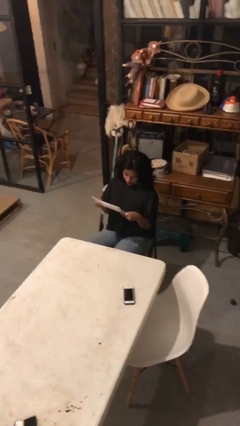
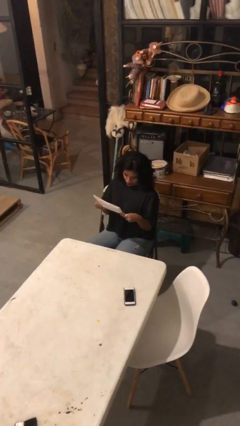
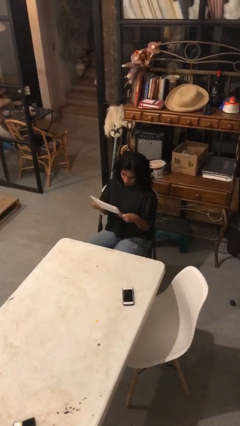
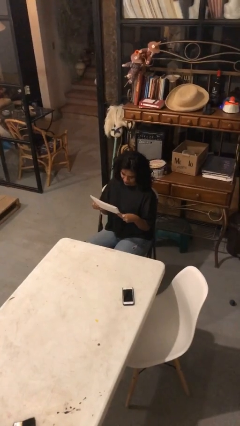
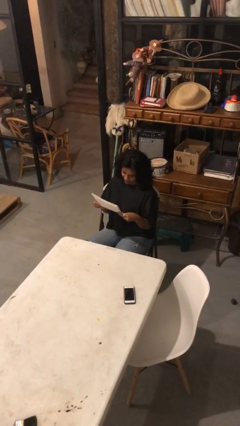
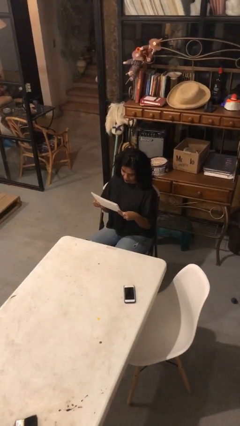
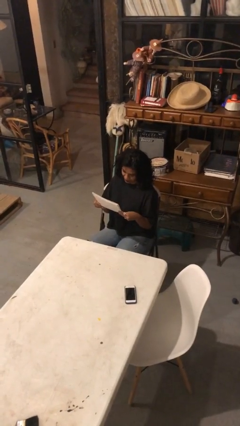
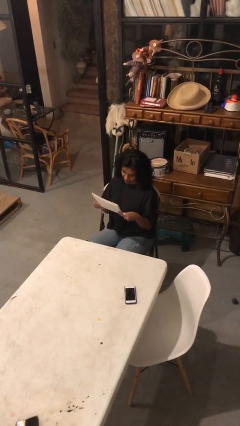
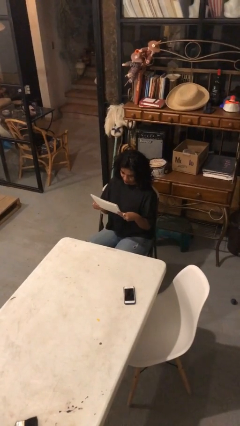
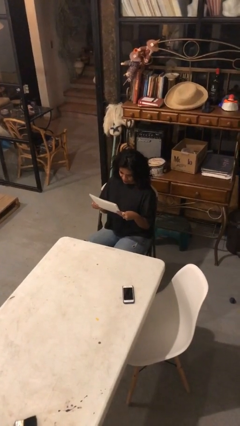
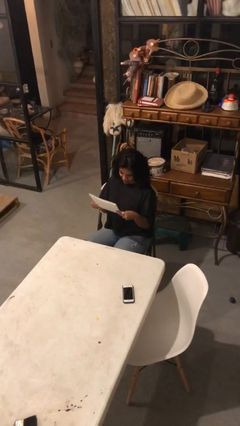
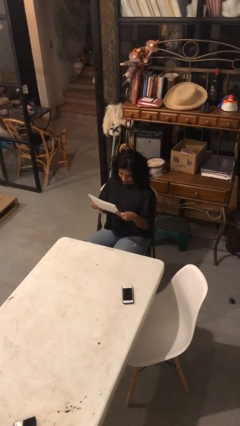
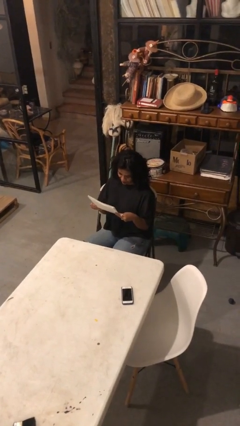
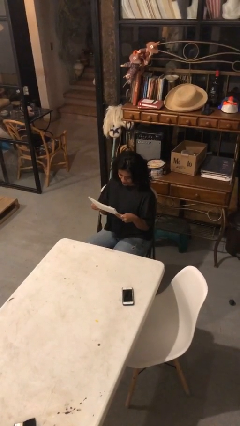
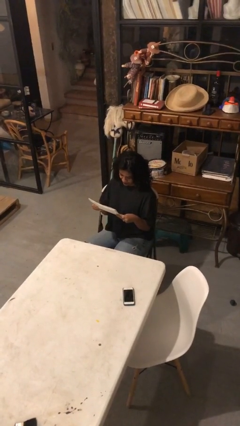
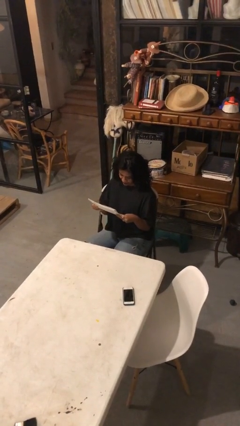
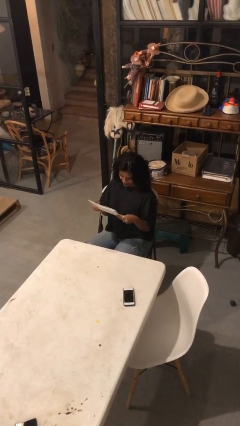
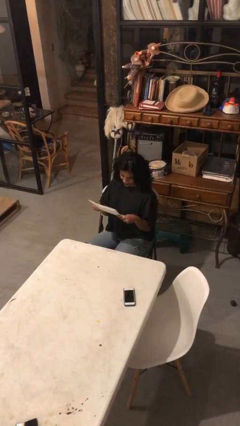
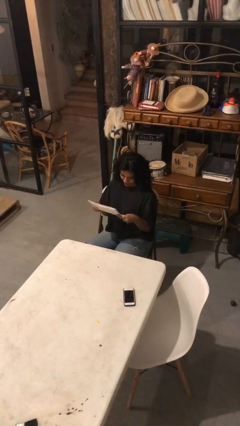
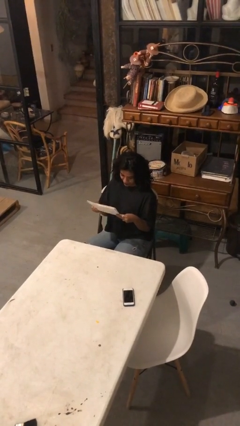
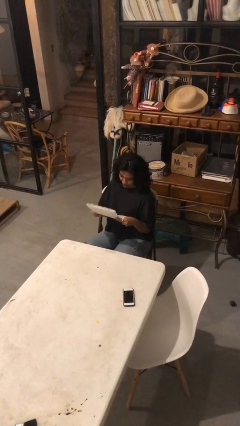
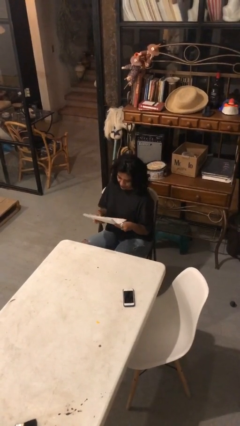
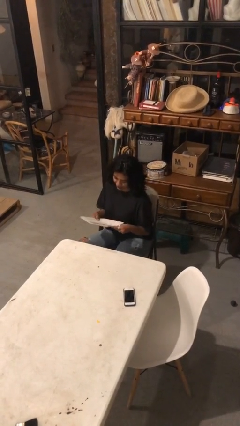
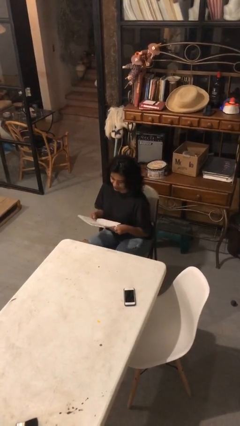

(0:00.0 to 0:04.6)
person reads document

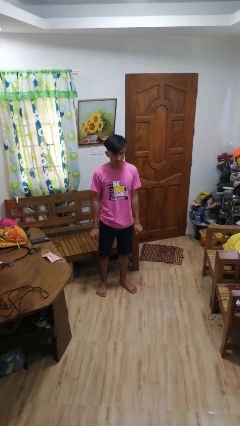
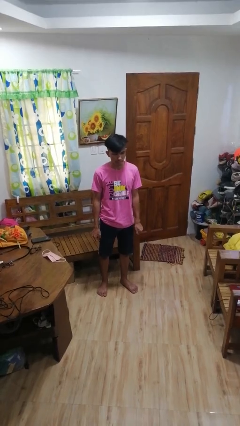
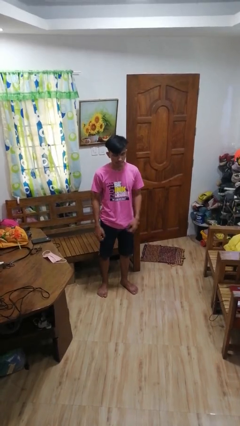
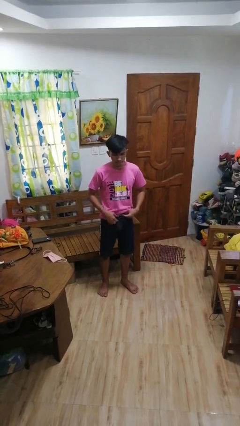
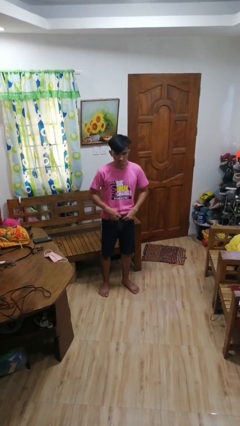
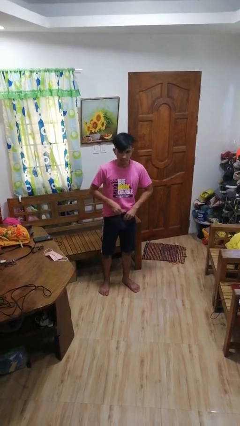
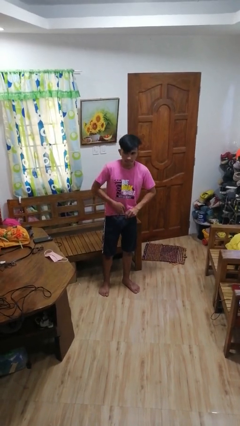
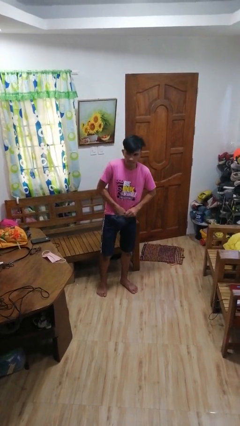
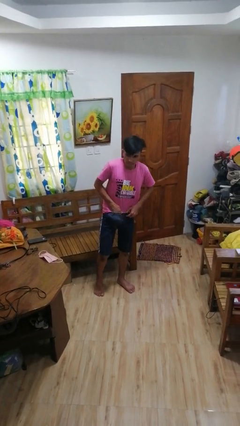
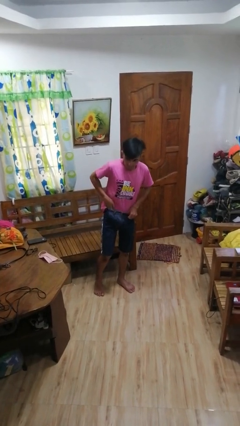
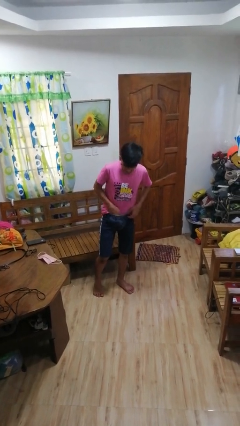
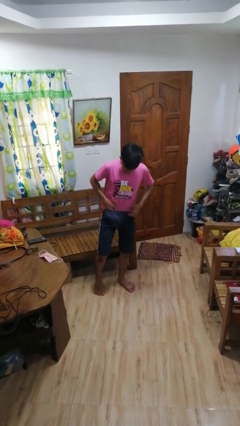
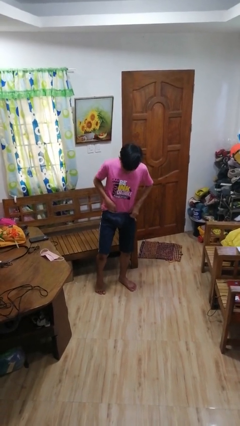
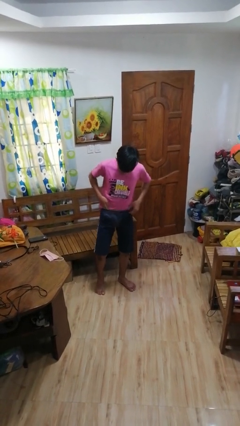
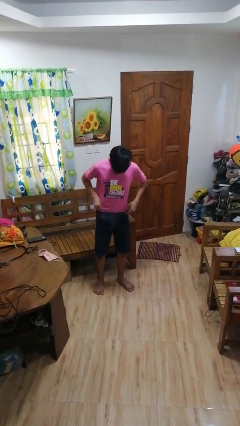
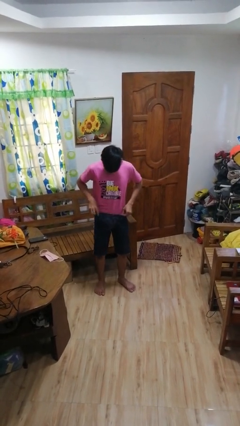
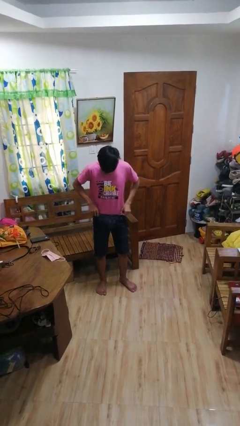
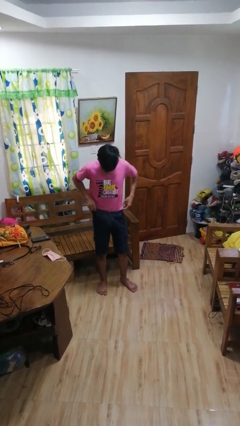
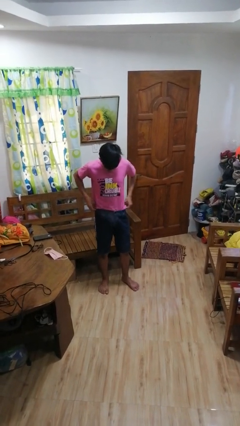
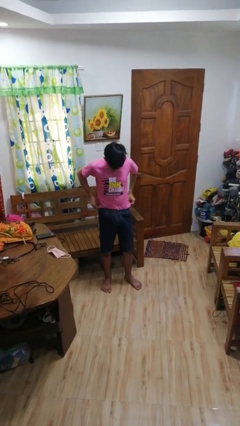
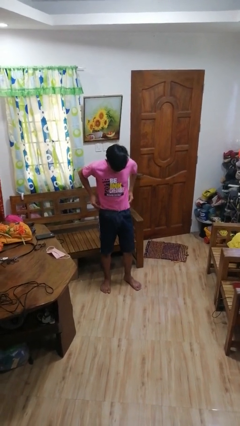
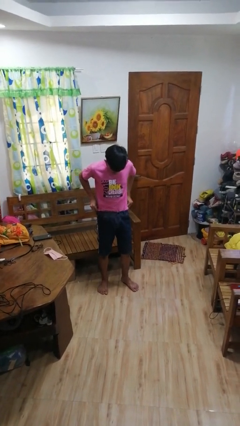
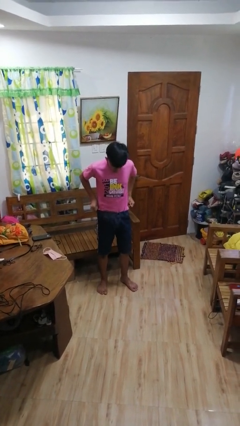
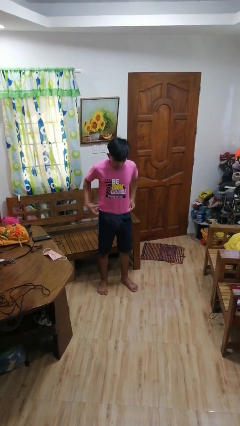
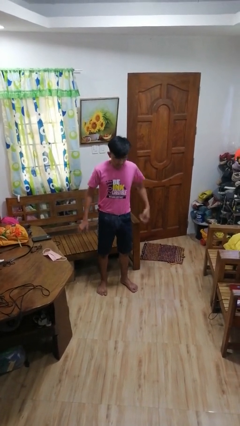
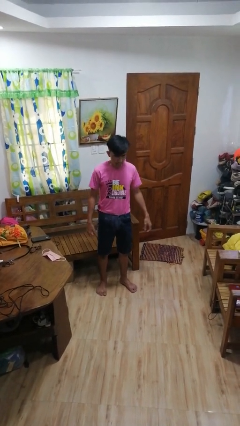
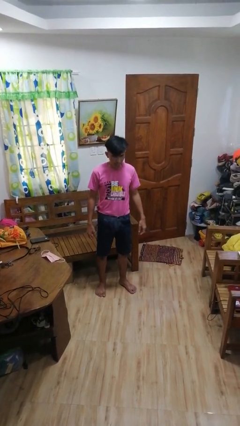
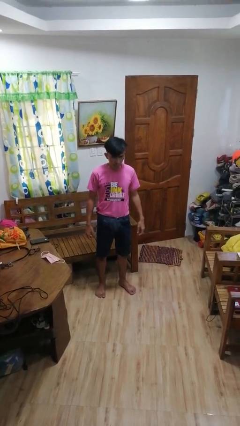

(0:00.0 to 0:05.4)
person tucks in shirt

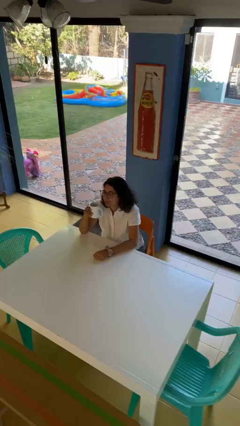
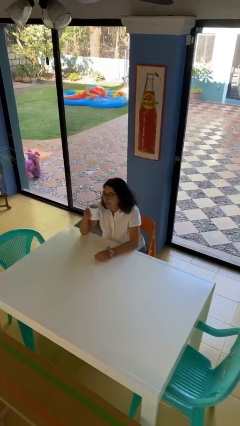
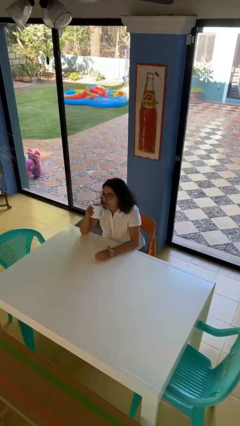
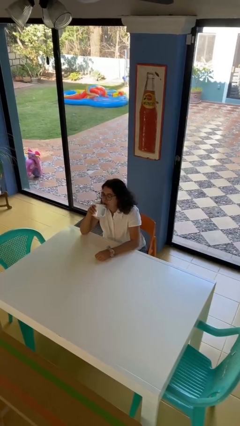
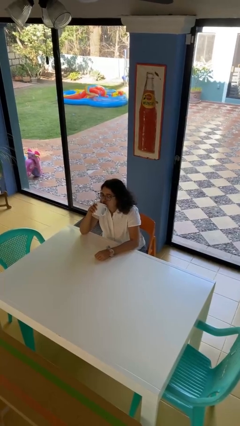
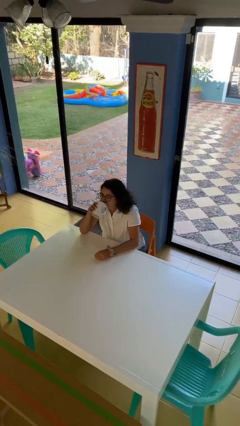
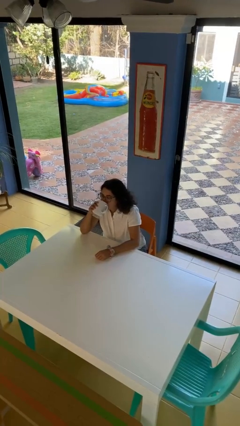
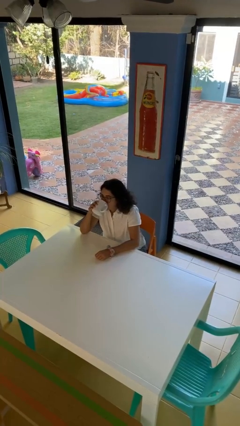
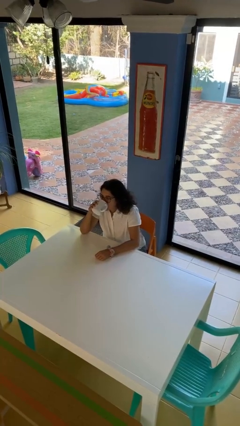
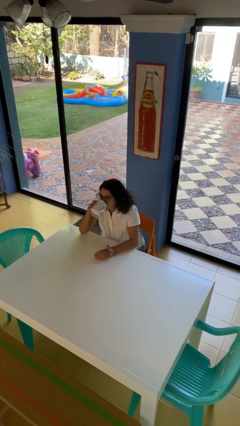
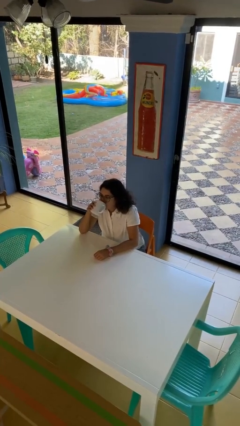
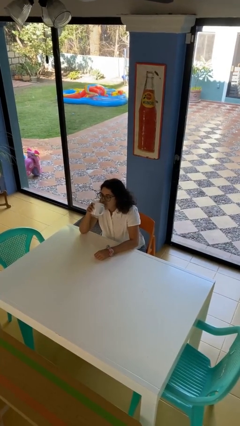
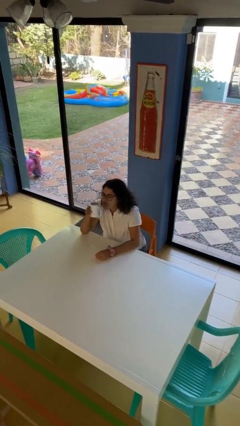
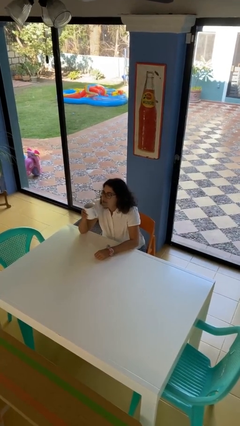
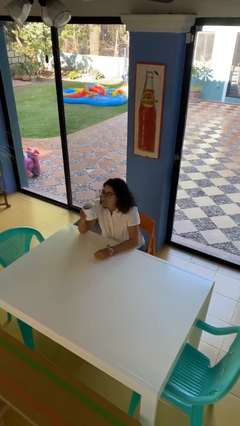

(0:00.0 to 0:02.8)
person drinks from mug

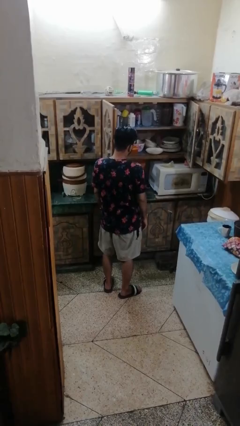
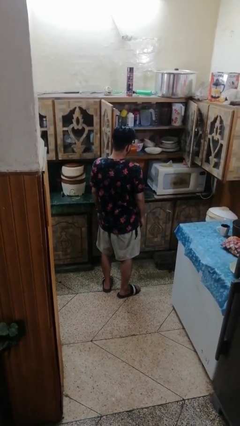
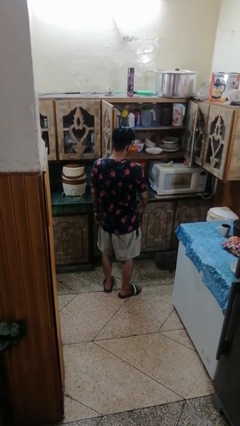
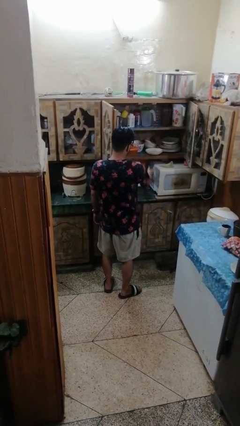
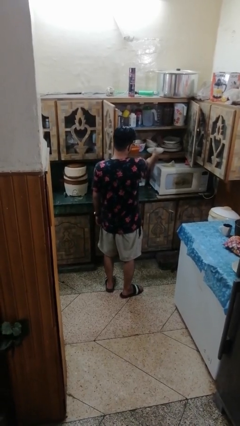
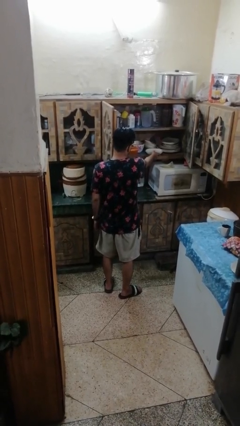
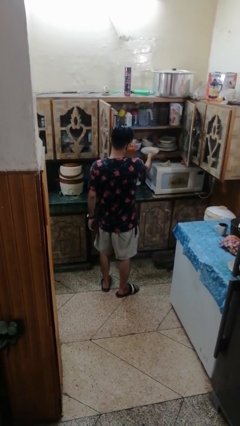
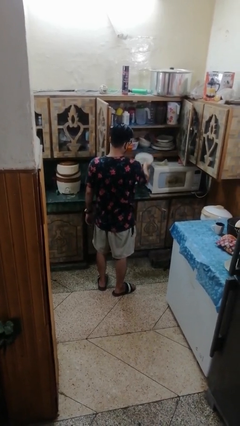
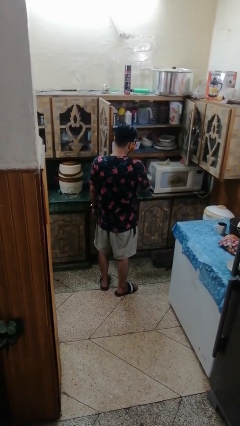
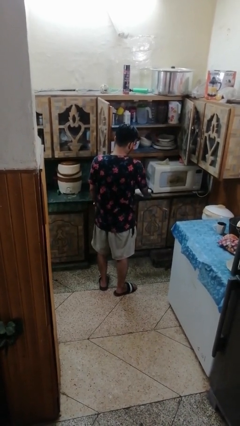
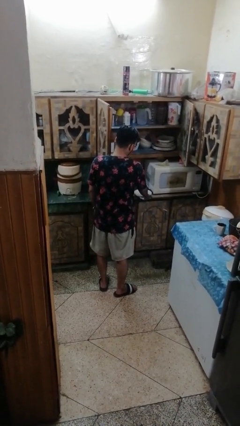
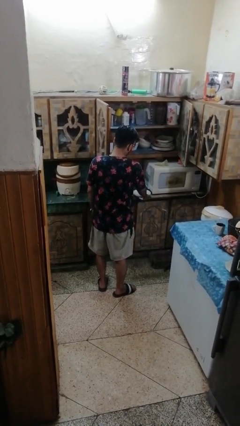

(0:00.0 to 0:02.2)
person takes object from cabinet

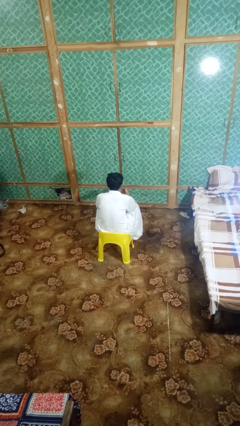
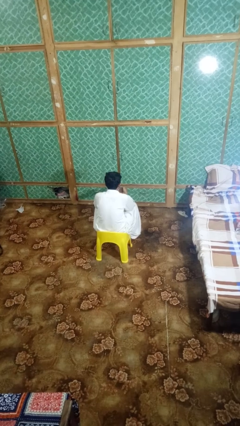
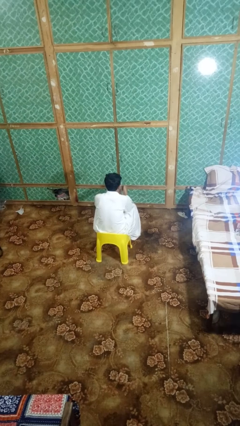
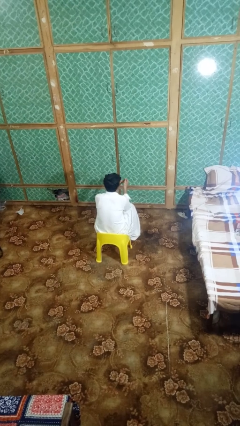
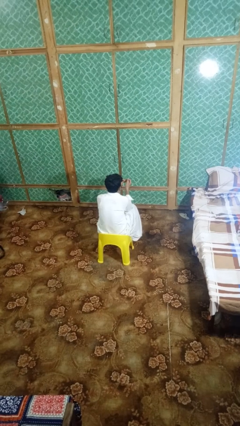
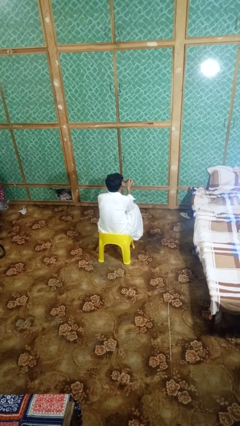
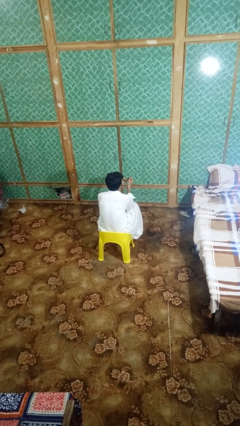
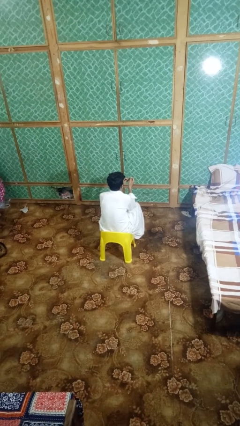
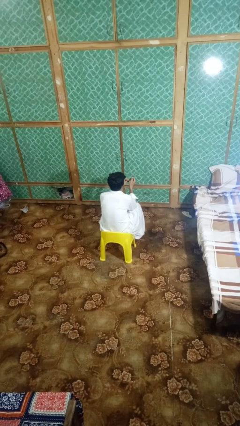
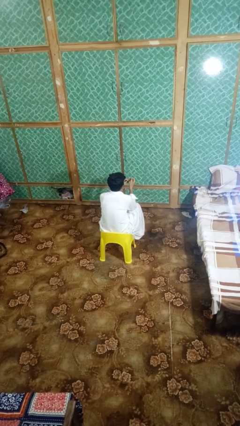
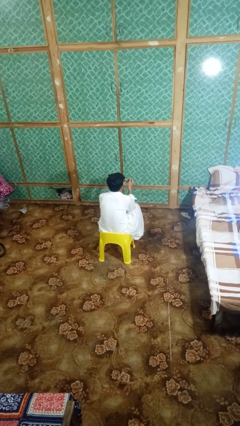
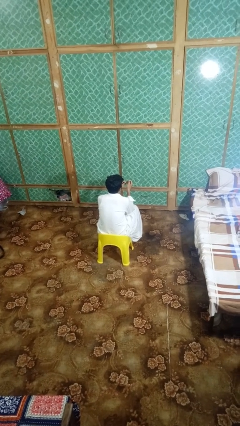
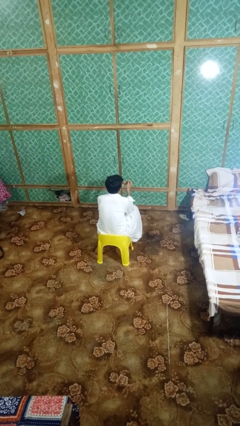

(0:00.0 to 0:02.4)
person files fingernails

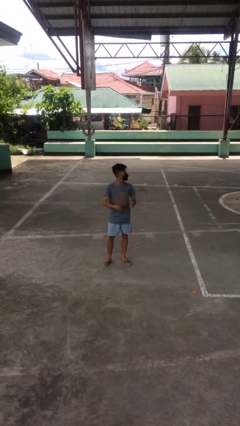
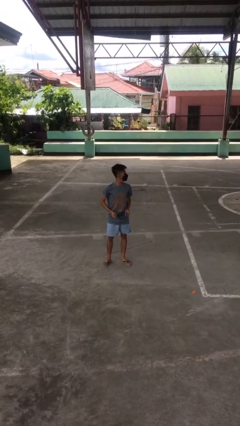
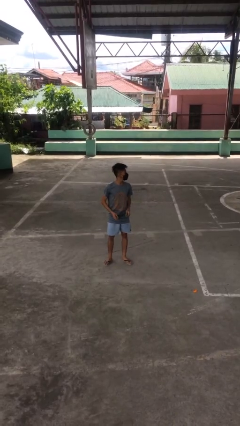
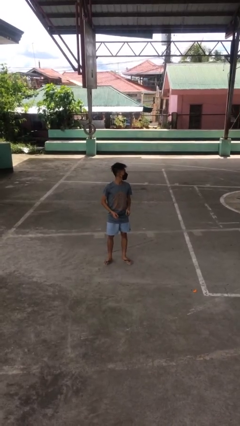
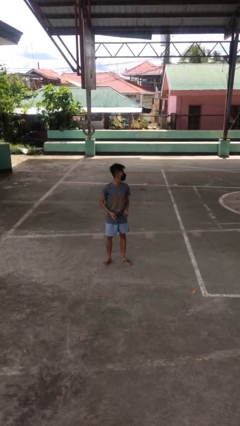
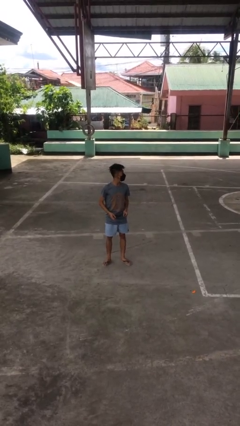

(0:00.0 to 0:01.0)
person takes off glasses
